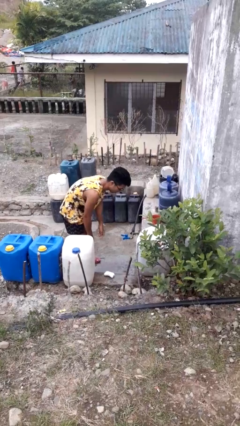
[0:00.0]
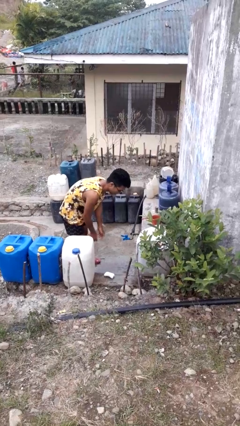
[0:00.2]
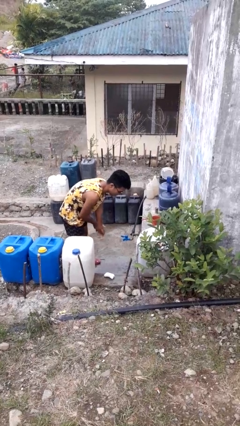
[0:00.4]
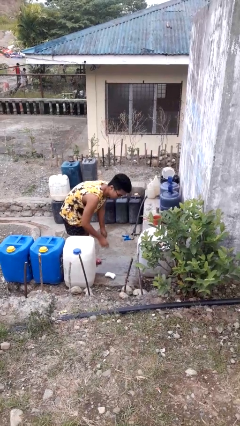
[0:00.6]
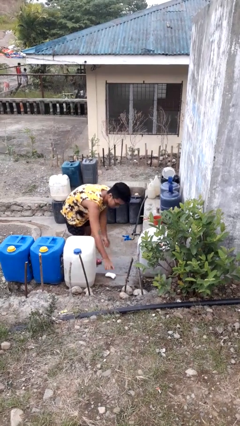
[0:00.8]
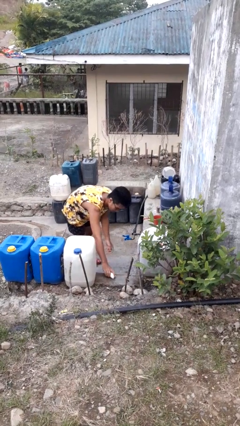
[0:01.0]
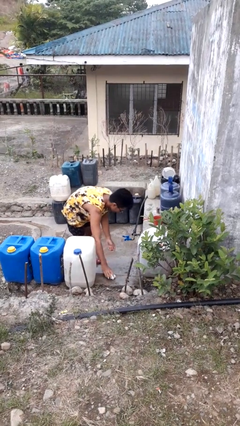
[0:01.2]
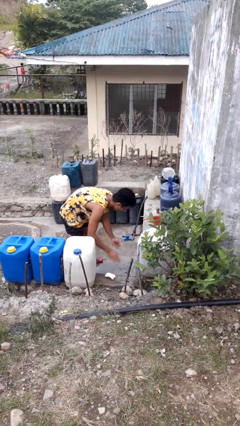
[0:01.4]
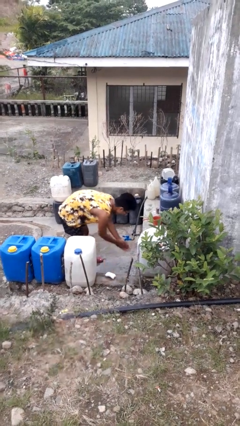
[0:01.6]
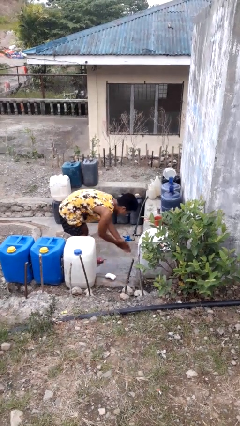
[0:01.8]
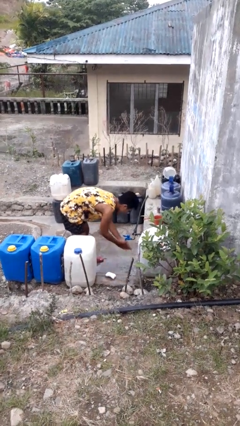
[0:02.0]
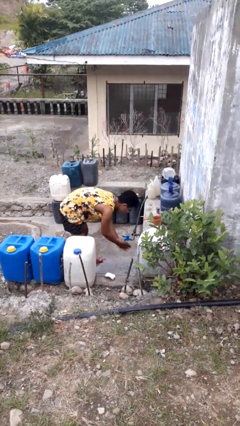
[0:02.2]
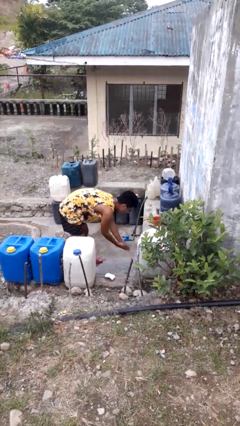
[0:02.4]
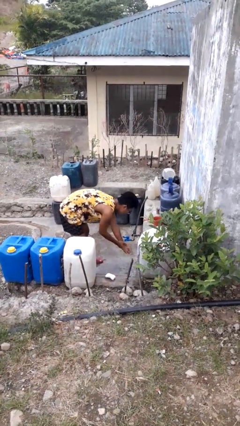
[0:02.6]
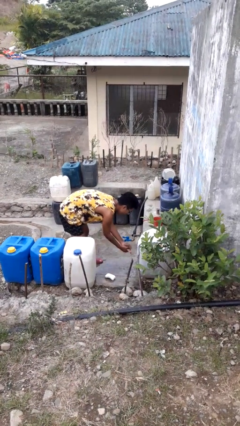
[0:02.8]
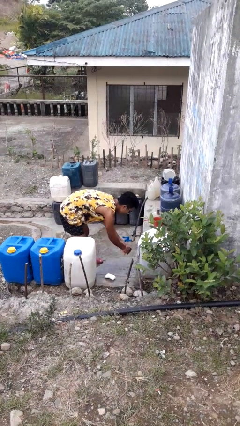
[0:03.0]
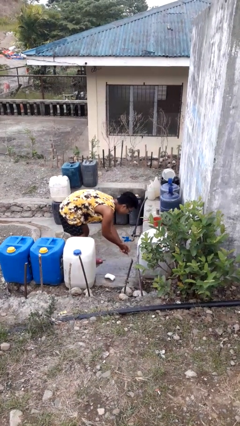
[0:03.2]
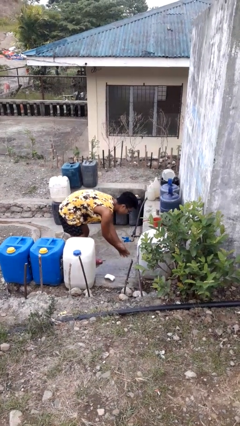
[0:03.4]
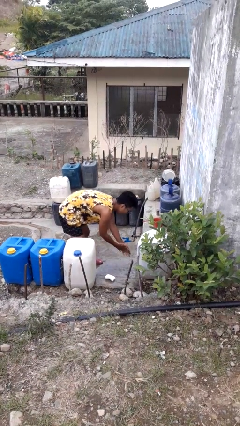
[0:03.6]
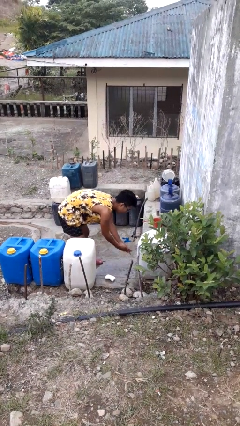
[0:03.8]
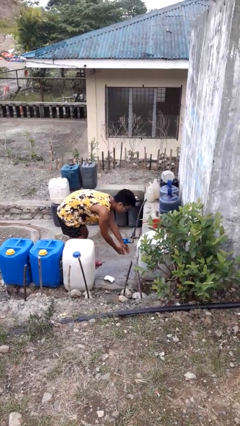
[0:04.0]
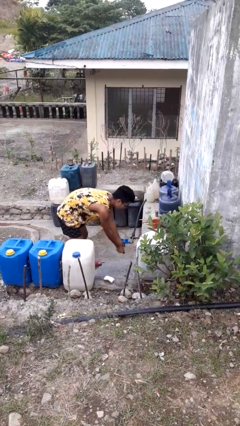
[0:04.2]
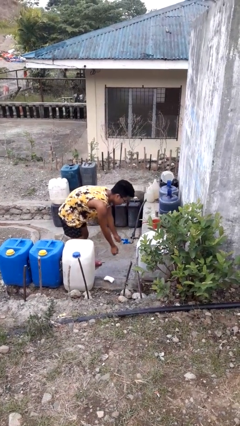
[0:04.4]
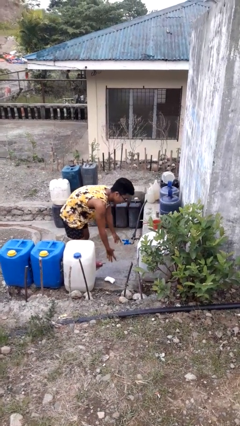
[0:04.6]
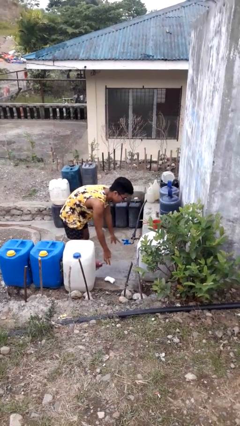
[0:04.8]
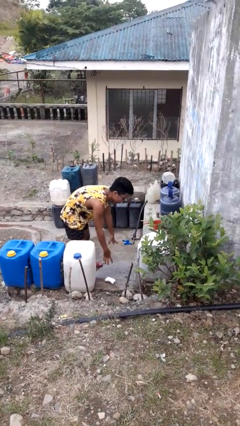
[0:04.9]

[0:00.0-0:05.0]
person washes hands

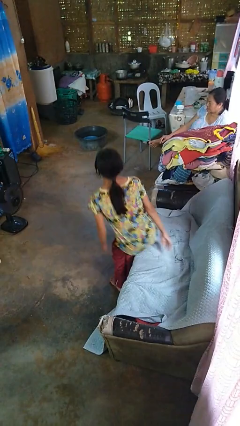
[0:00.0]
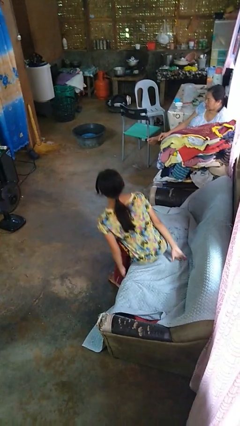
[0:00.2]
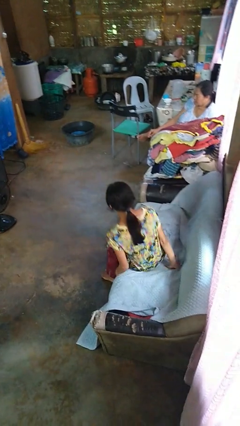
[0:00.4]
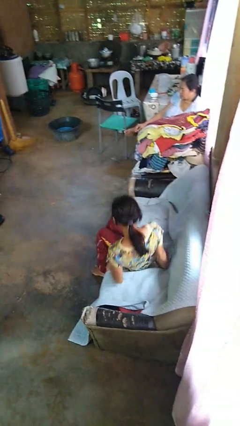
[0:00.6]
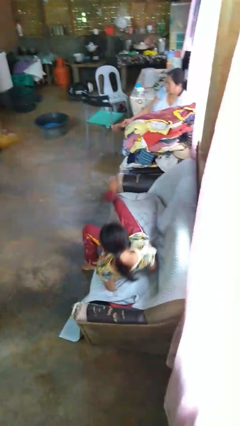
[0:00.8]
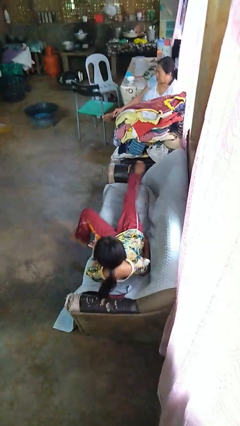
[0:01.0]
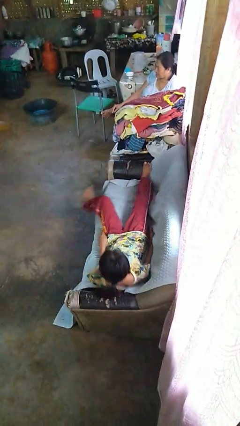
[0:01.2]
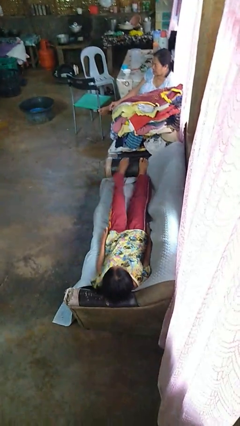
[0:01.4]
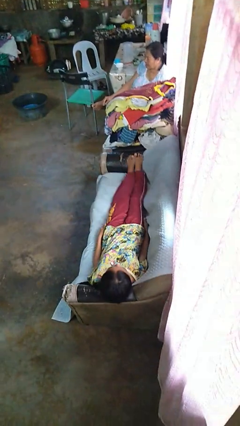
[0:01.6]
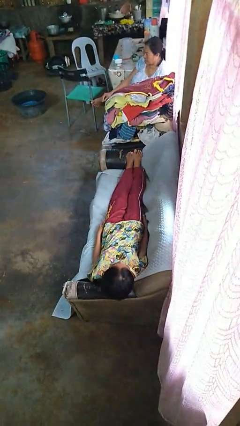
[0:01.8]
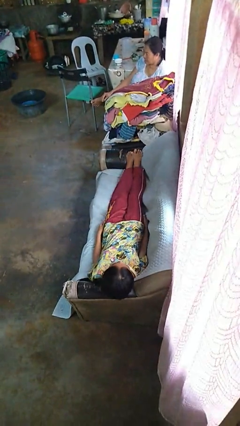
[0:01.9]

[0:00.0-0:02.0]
person lies down on couch

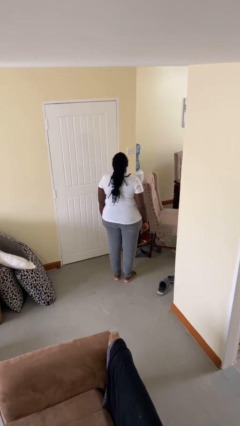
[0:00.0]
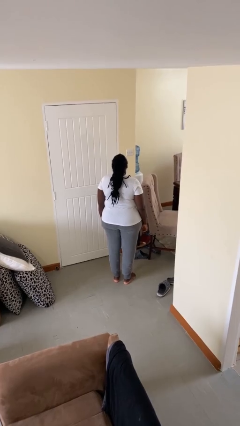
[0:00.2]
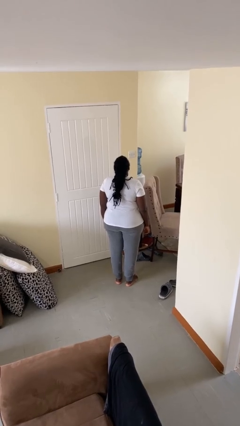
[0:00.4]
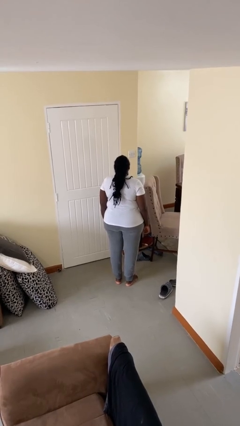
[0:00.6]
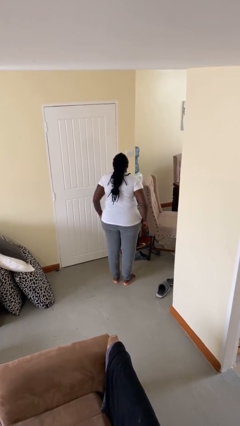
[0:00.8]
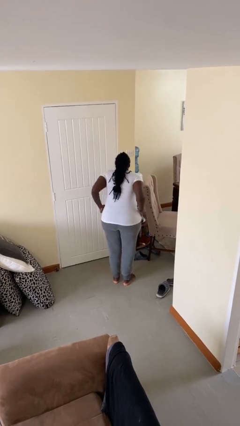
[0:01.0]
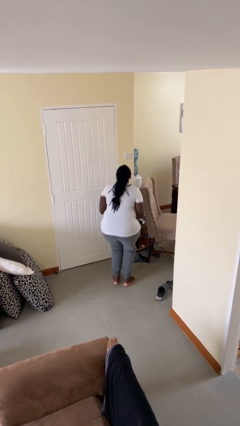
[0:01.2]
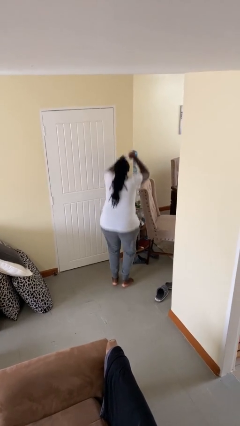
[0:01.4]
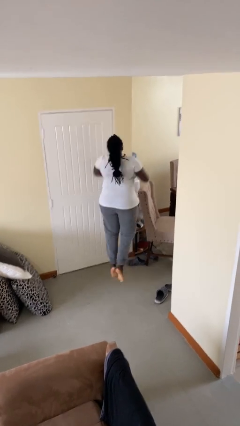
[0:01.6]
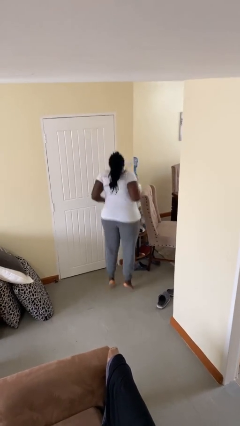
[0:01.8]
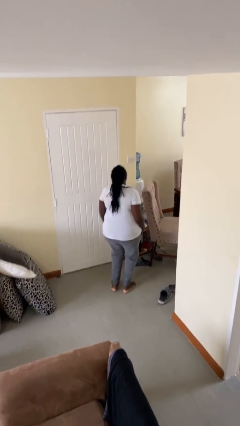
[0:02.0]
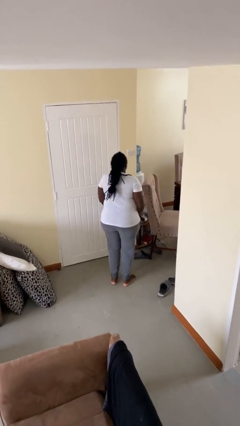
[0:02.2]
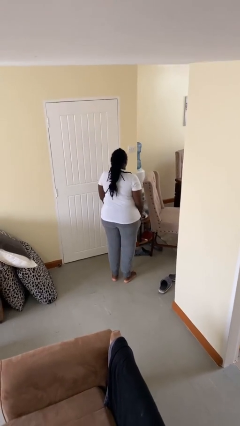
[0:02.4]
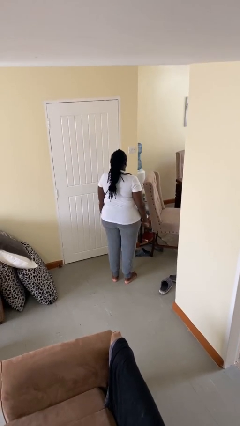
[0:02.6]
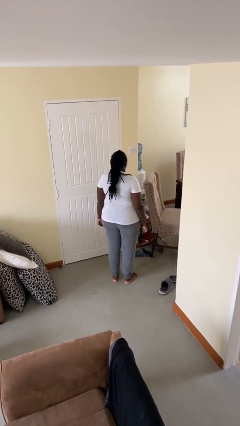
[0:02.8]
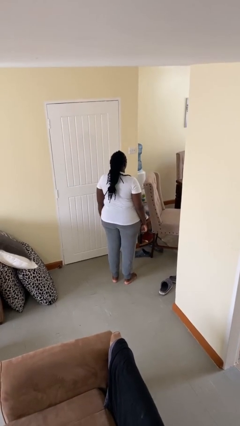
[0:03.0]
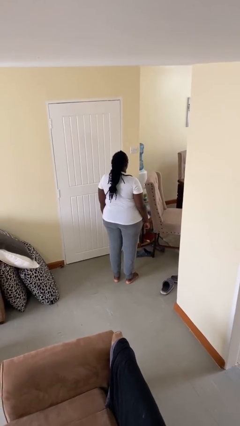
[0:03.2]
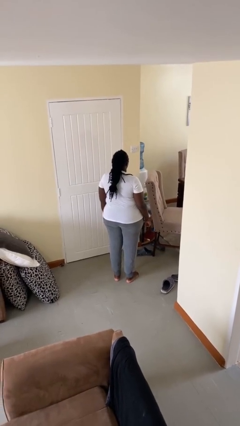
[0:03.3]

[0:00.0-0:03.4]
person jumps

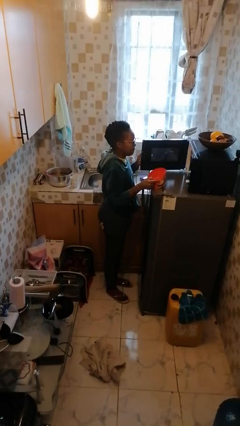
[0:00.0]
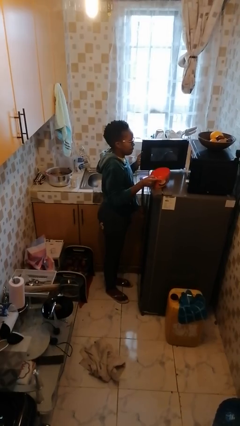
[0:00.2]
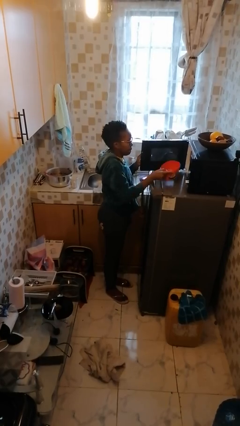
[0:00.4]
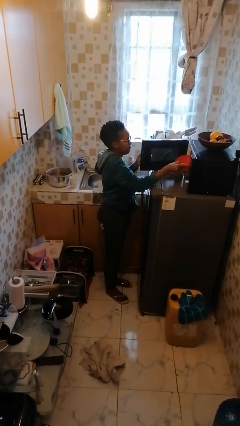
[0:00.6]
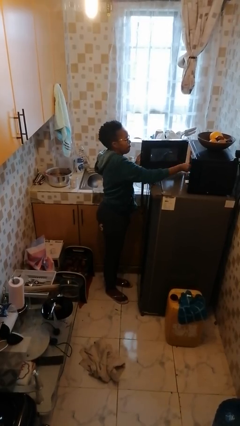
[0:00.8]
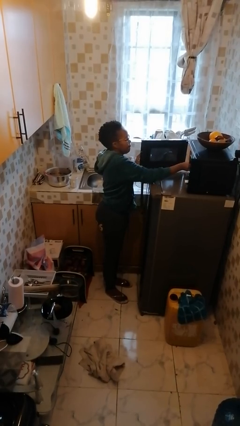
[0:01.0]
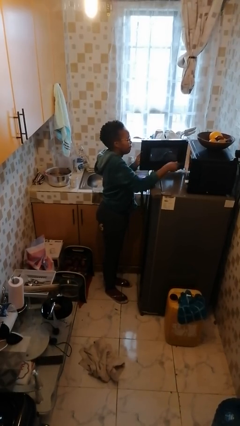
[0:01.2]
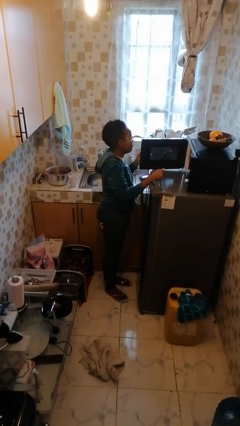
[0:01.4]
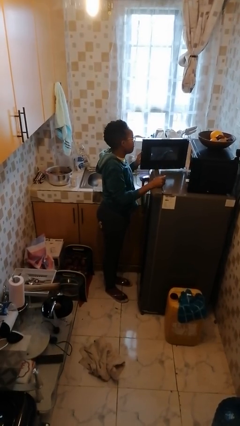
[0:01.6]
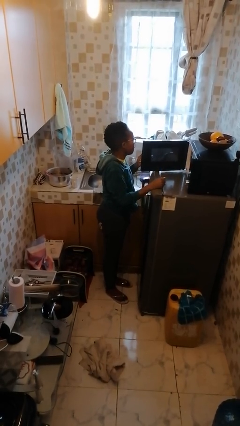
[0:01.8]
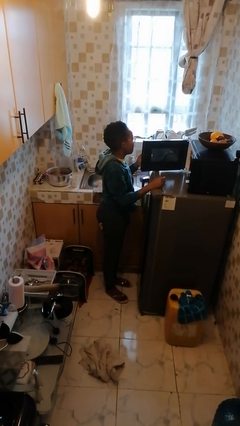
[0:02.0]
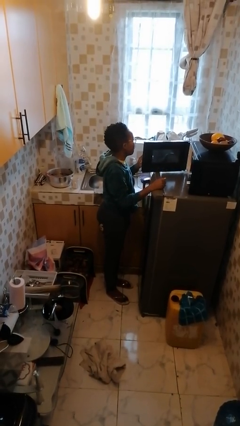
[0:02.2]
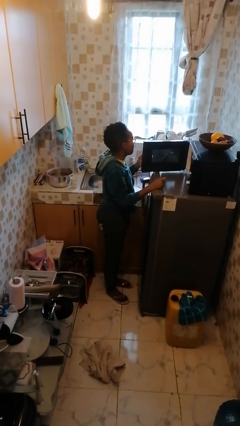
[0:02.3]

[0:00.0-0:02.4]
person puts object into microwave
